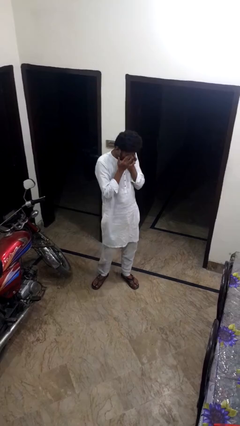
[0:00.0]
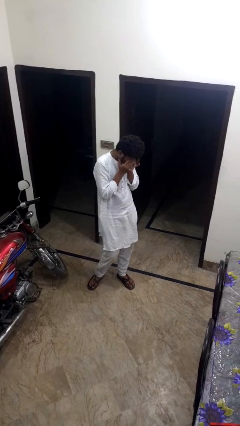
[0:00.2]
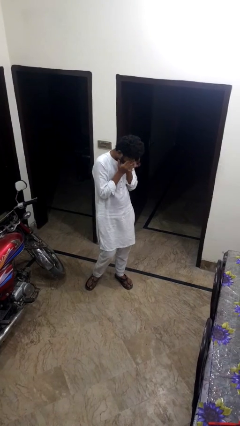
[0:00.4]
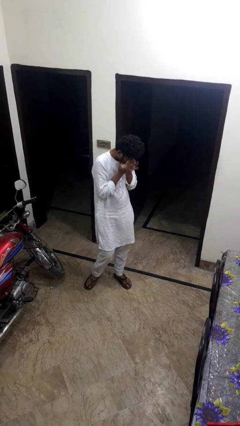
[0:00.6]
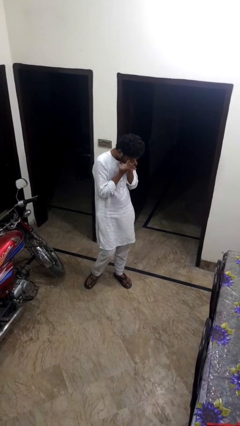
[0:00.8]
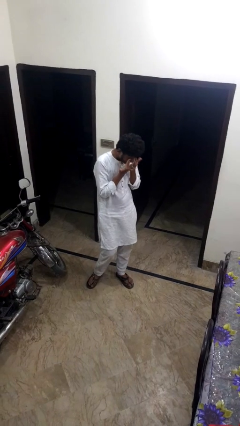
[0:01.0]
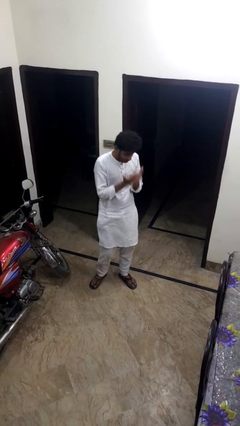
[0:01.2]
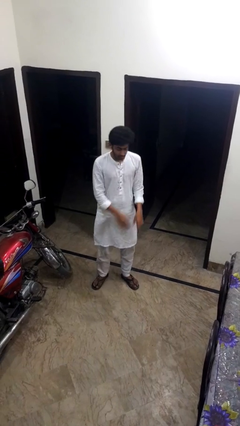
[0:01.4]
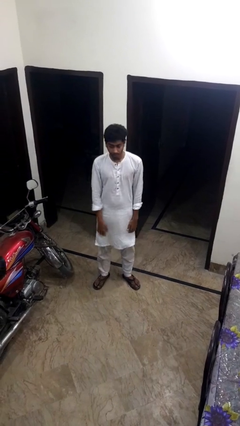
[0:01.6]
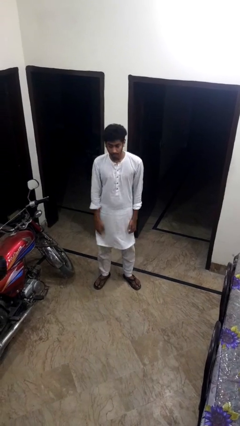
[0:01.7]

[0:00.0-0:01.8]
person rubs eyes

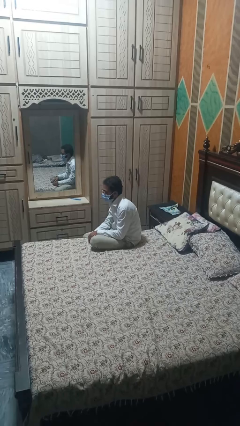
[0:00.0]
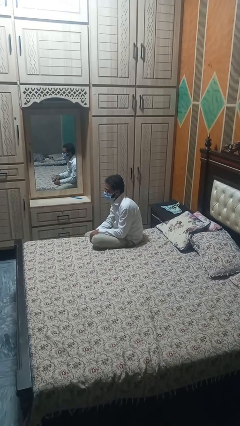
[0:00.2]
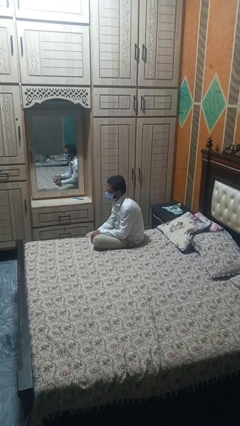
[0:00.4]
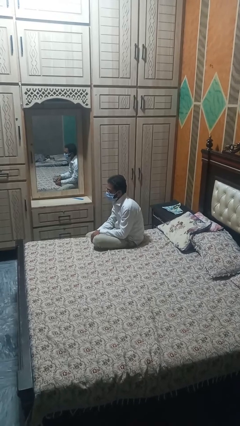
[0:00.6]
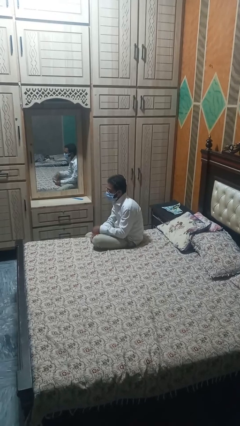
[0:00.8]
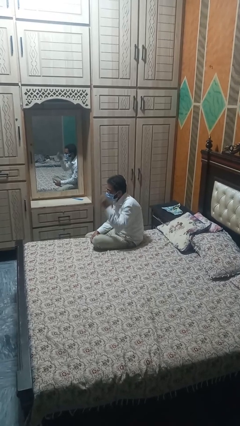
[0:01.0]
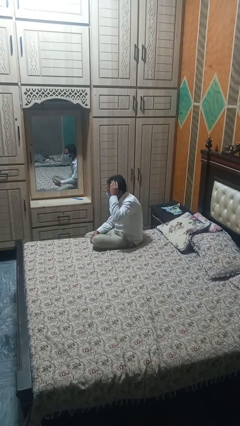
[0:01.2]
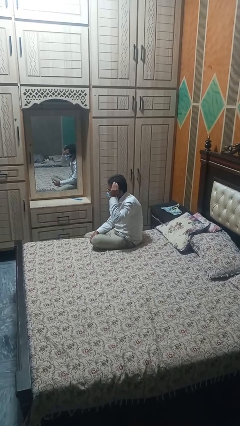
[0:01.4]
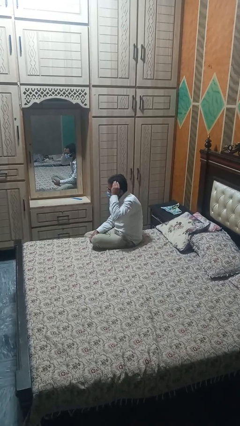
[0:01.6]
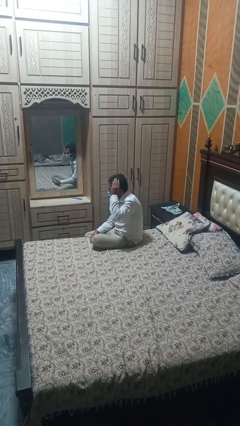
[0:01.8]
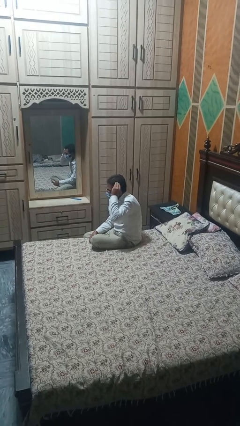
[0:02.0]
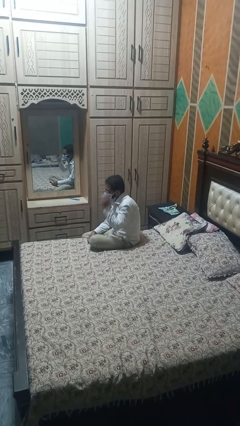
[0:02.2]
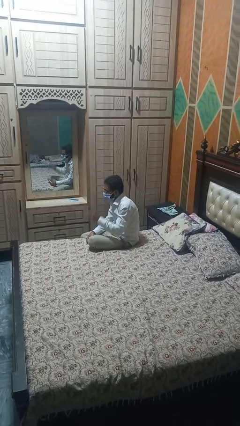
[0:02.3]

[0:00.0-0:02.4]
person strokes hair

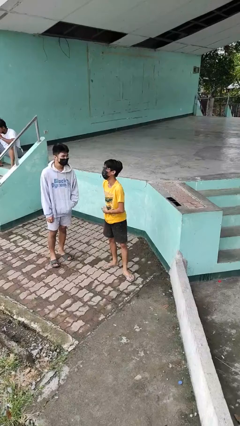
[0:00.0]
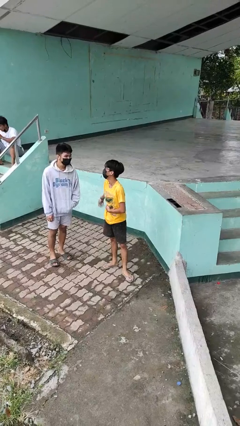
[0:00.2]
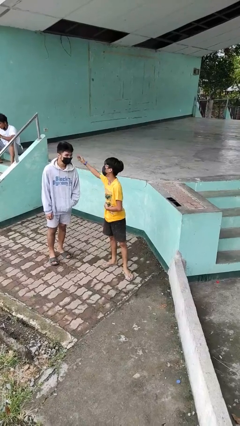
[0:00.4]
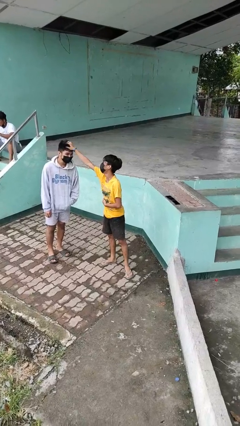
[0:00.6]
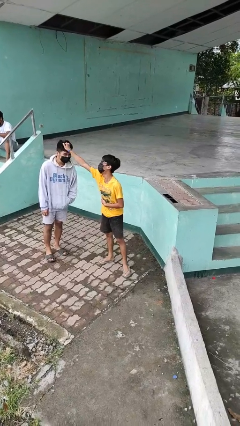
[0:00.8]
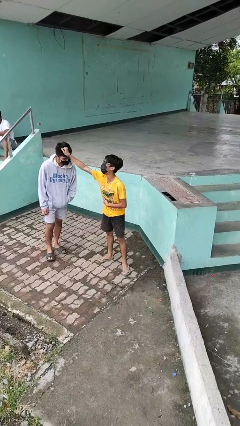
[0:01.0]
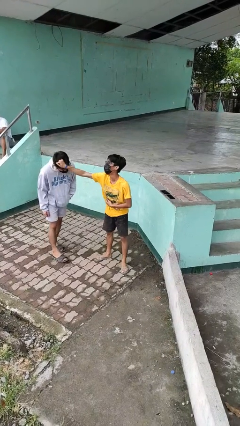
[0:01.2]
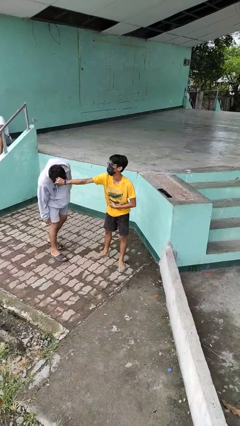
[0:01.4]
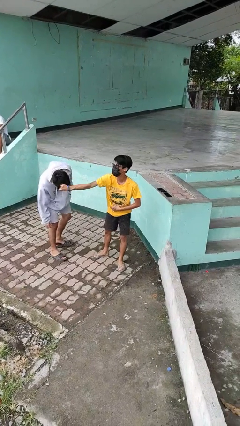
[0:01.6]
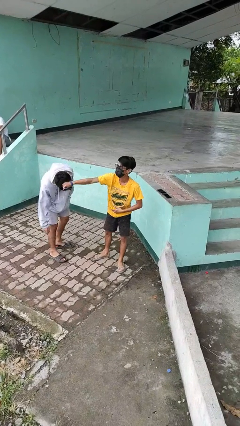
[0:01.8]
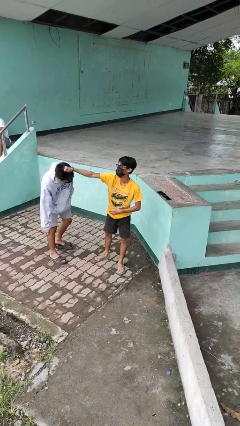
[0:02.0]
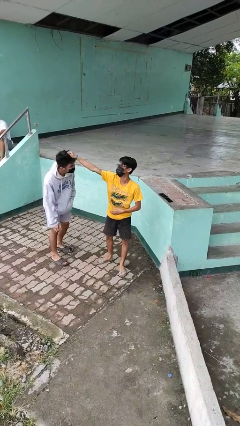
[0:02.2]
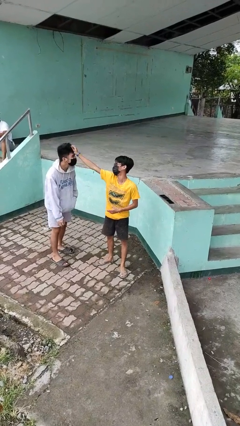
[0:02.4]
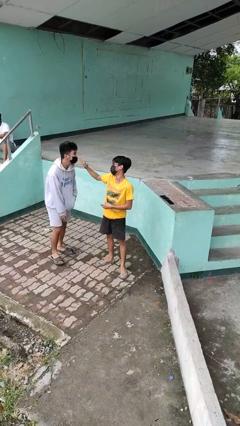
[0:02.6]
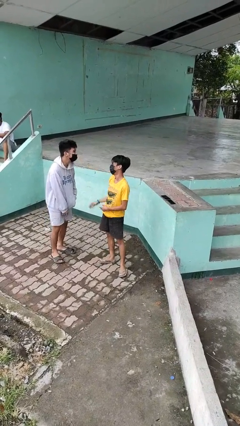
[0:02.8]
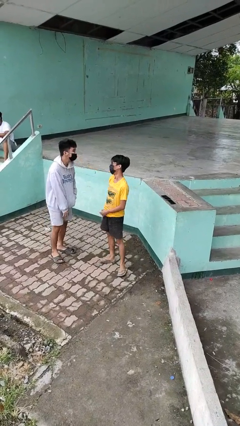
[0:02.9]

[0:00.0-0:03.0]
person grabs person by hair

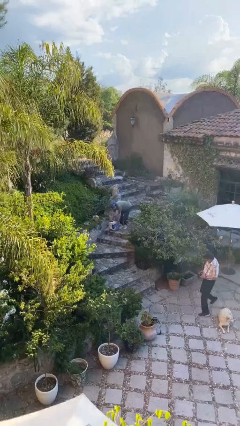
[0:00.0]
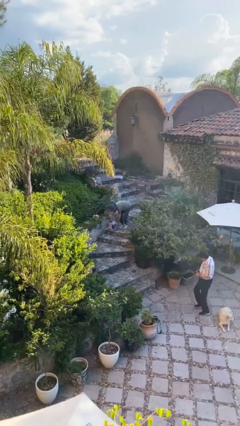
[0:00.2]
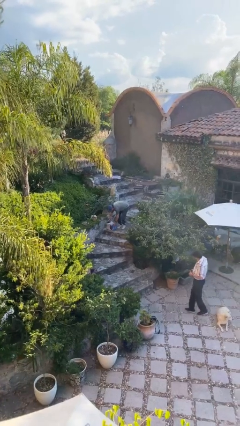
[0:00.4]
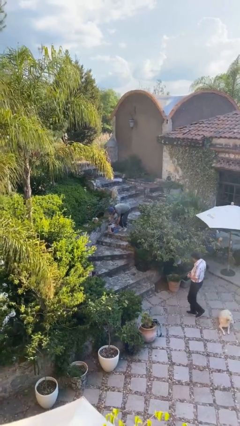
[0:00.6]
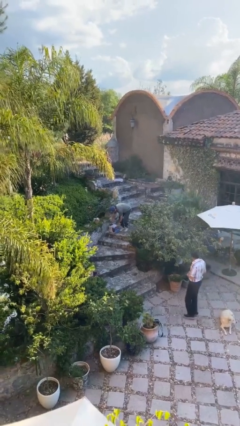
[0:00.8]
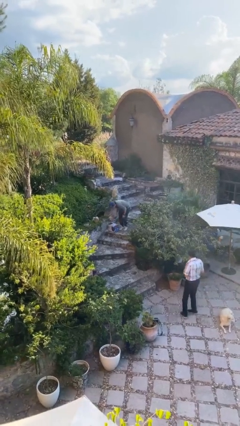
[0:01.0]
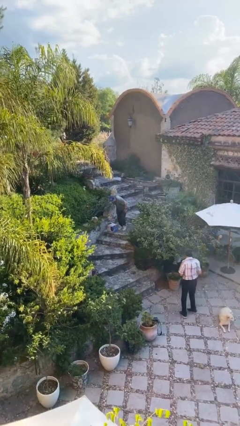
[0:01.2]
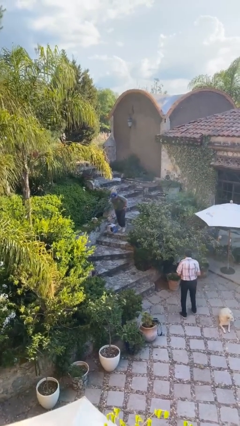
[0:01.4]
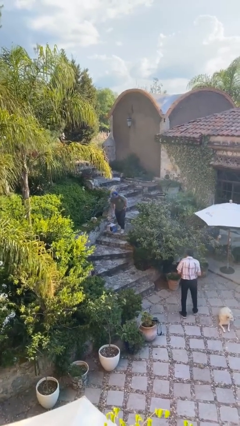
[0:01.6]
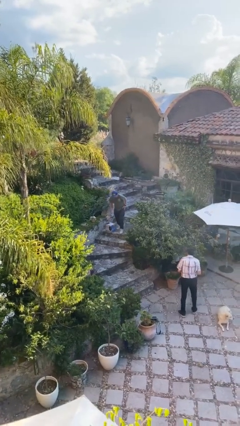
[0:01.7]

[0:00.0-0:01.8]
person puts down object on floor

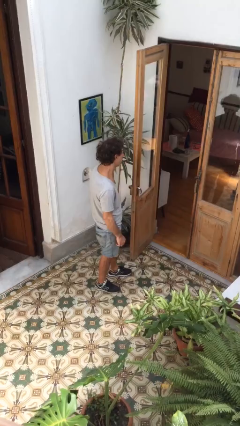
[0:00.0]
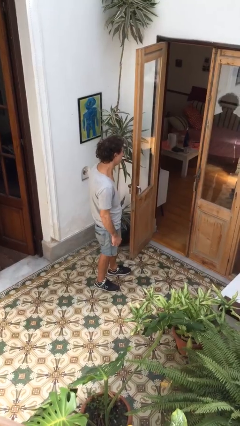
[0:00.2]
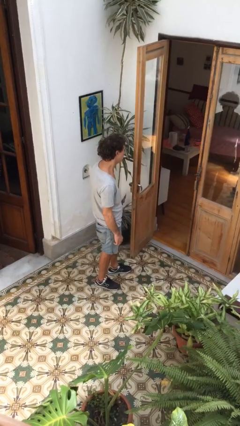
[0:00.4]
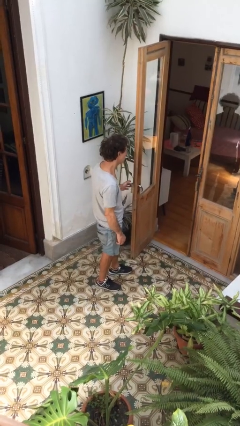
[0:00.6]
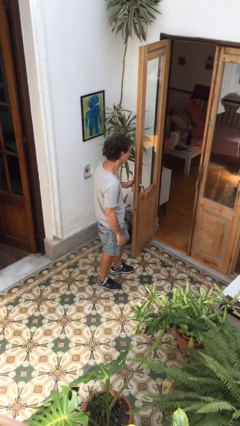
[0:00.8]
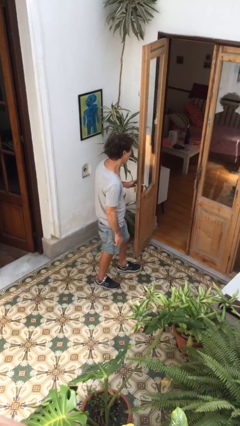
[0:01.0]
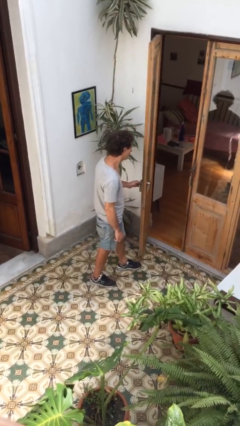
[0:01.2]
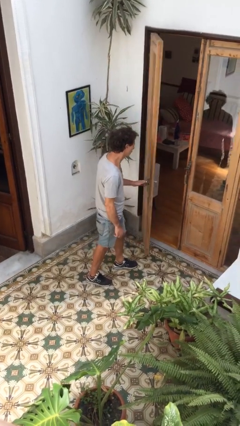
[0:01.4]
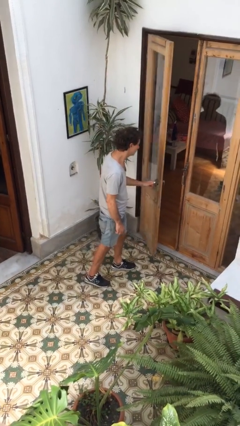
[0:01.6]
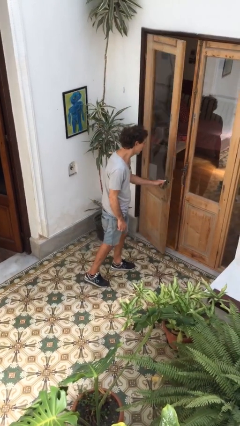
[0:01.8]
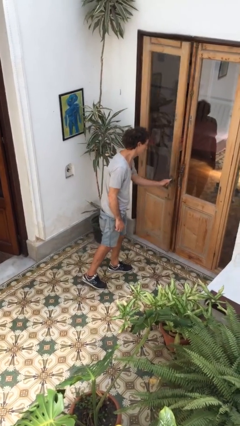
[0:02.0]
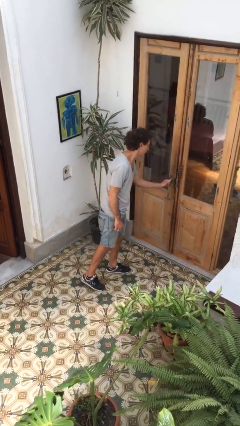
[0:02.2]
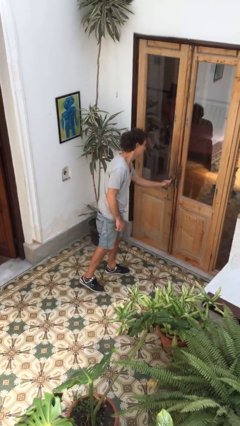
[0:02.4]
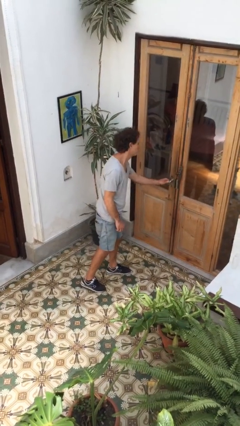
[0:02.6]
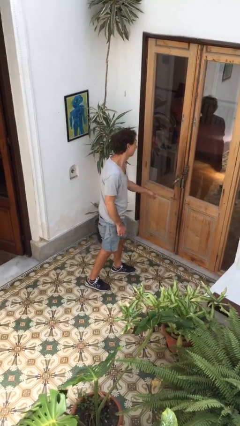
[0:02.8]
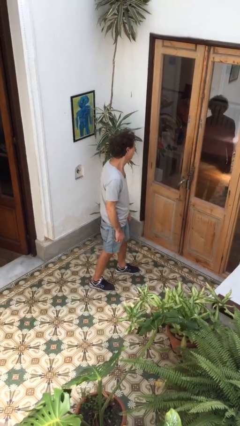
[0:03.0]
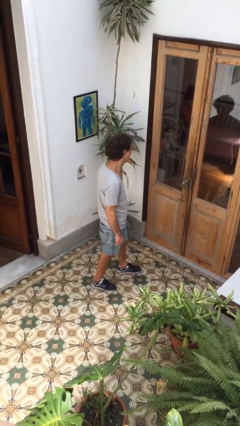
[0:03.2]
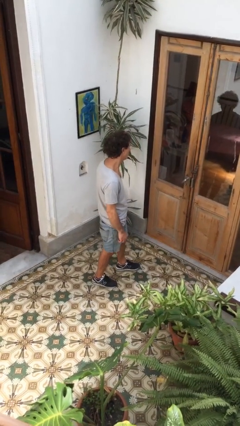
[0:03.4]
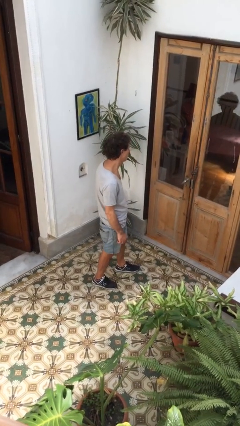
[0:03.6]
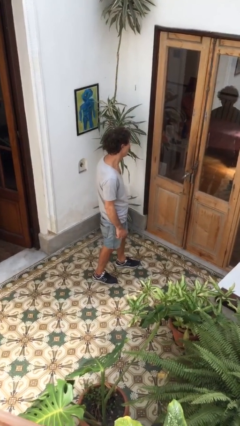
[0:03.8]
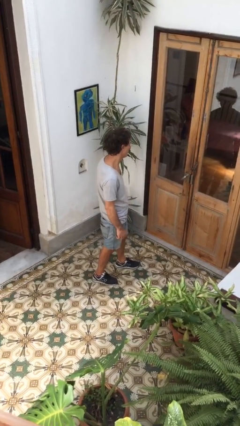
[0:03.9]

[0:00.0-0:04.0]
person closes facility door

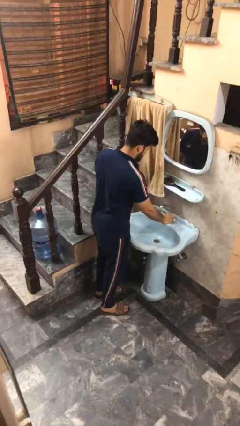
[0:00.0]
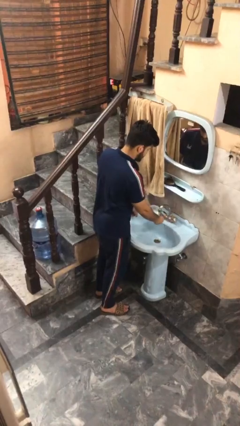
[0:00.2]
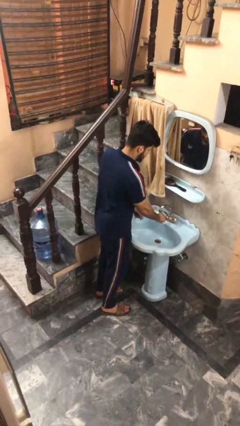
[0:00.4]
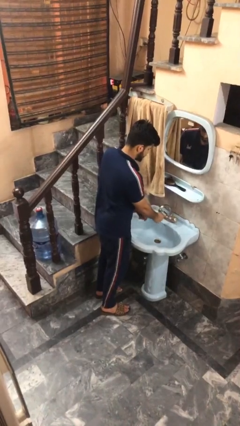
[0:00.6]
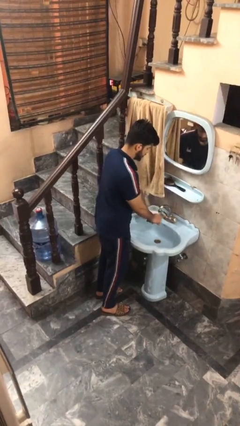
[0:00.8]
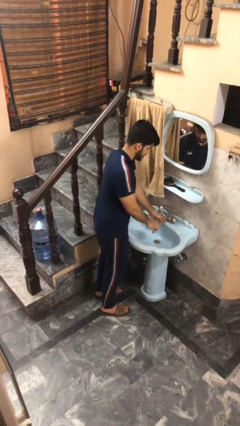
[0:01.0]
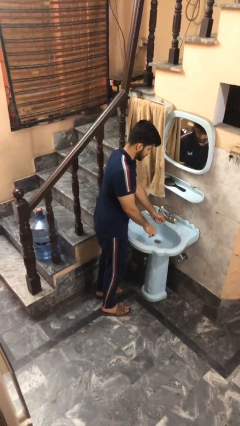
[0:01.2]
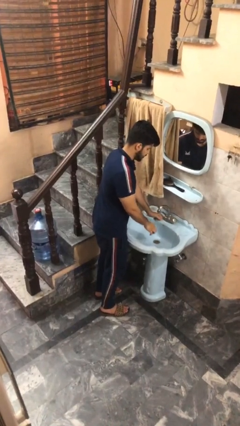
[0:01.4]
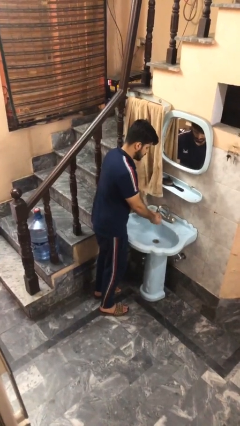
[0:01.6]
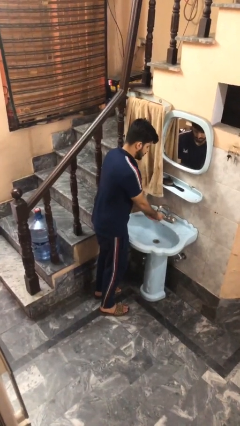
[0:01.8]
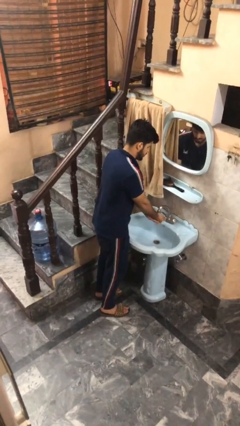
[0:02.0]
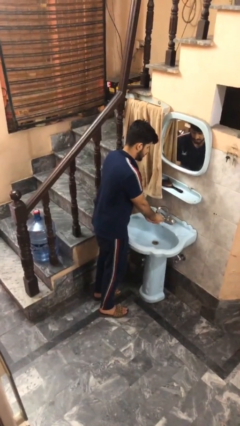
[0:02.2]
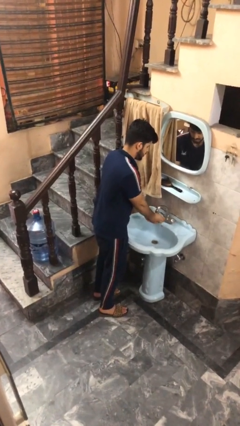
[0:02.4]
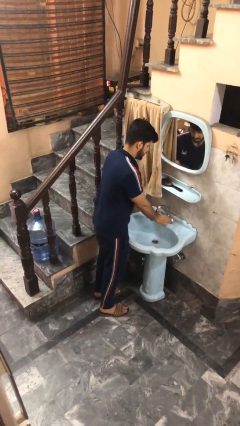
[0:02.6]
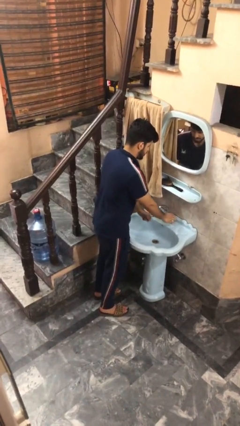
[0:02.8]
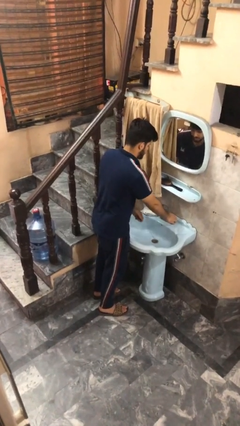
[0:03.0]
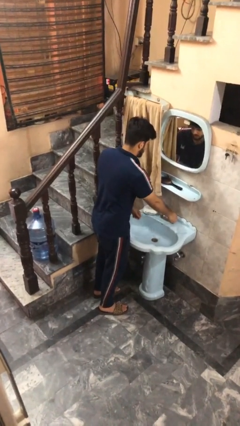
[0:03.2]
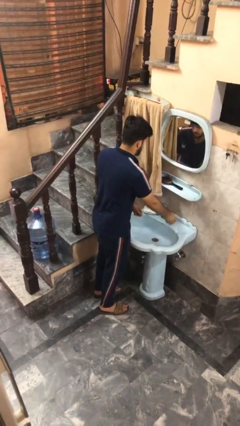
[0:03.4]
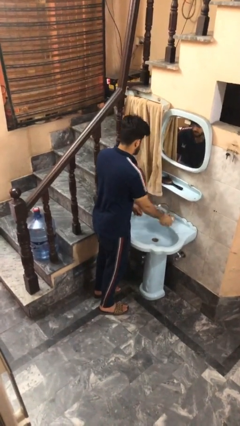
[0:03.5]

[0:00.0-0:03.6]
person washes hands

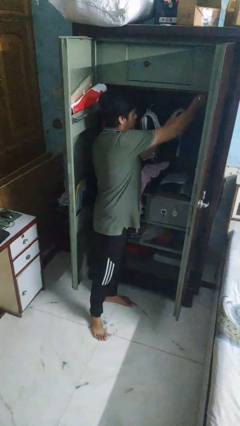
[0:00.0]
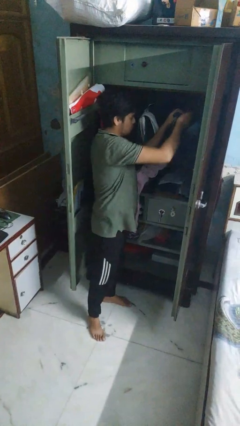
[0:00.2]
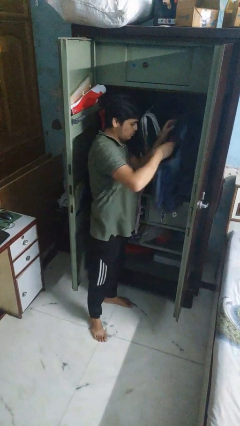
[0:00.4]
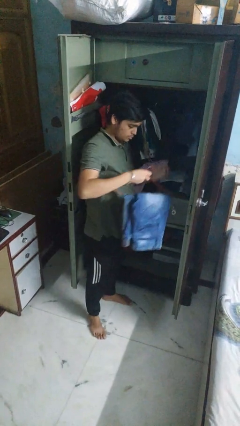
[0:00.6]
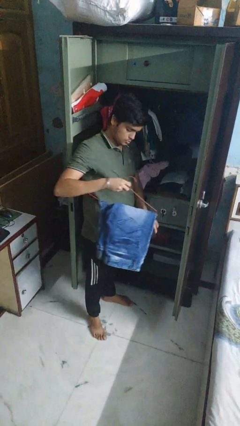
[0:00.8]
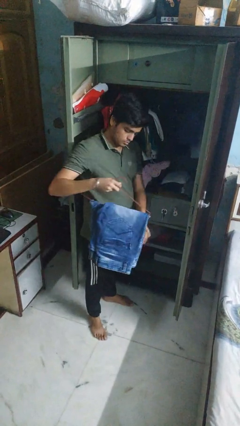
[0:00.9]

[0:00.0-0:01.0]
person takes clothes from closet
